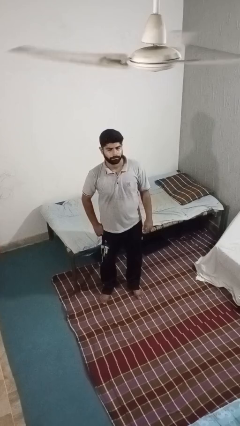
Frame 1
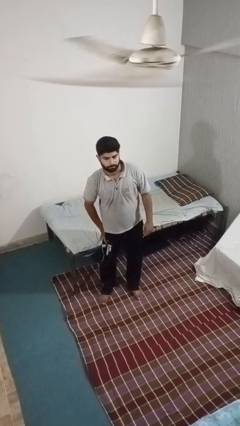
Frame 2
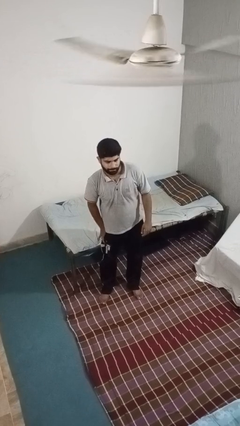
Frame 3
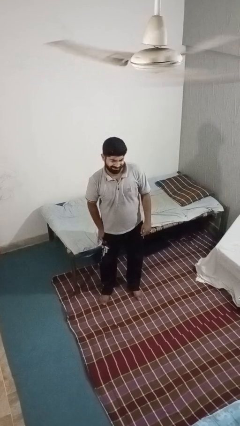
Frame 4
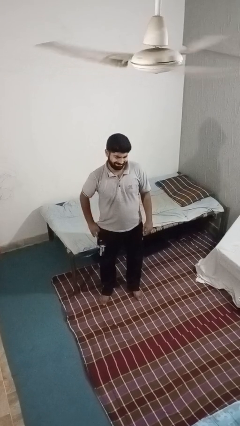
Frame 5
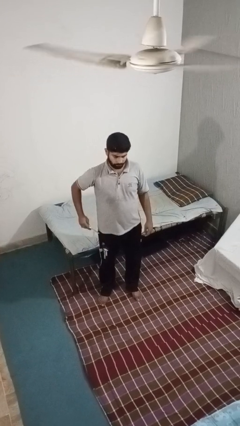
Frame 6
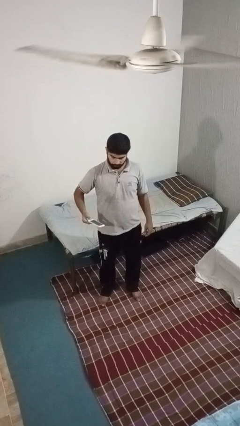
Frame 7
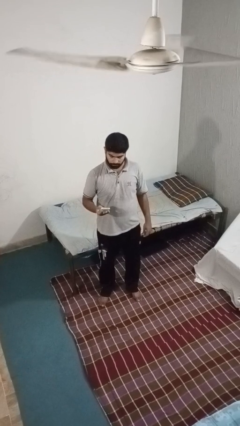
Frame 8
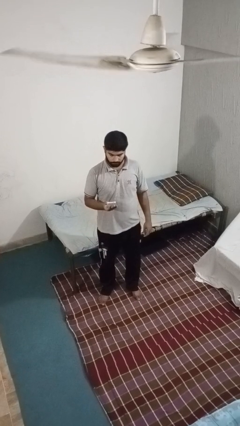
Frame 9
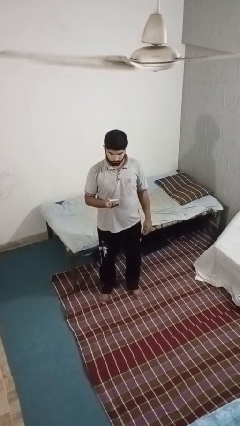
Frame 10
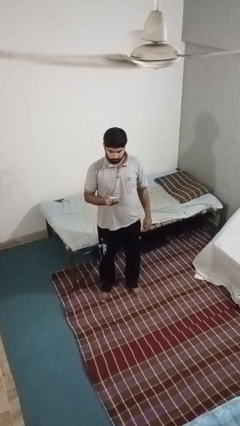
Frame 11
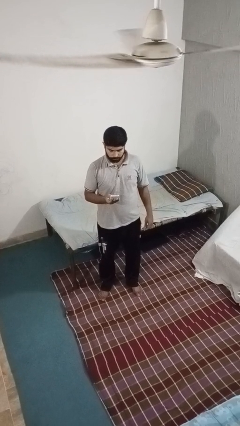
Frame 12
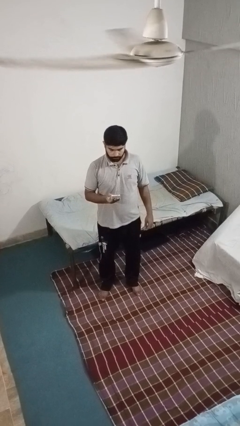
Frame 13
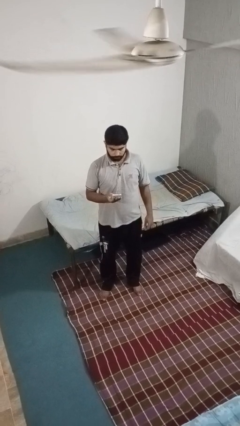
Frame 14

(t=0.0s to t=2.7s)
person takes phone from pocket

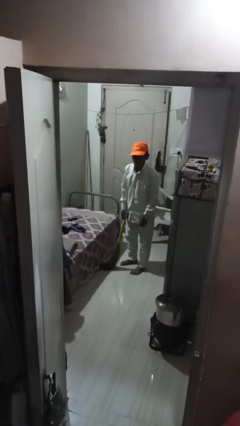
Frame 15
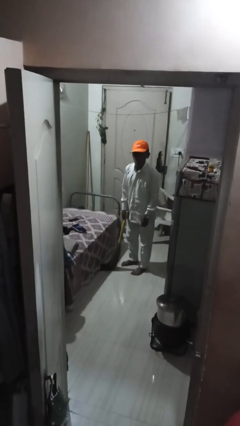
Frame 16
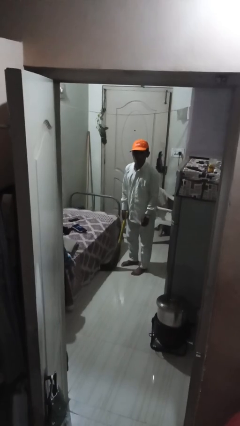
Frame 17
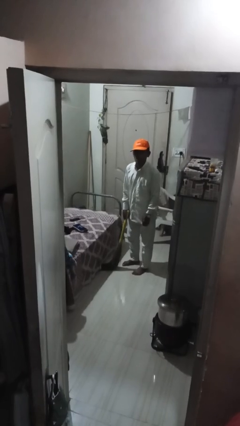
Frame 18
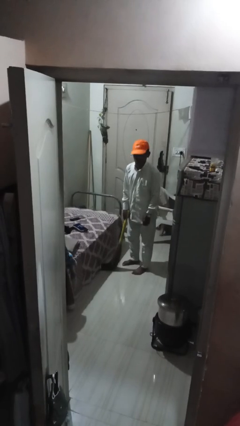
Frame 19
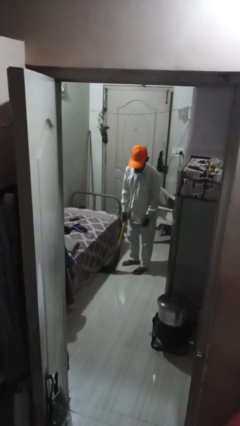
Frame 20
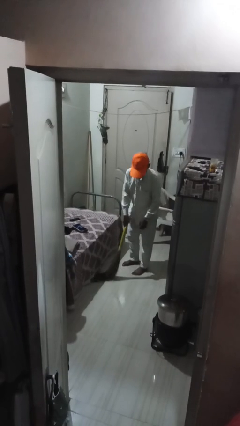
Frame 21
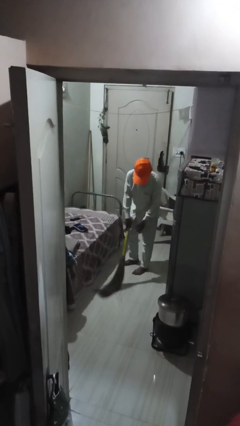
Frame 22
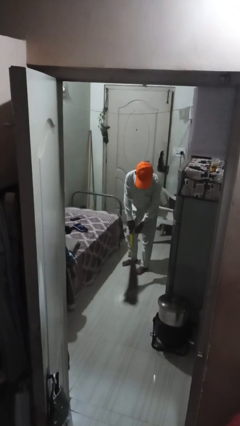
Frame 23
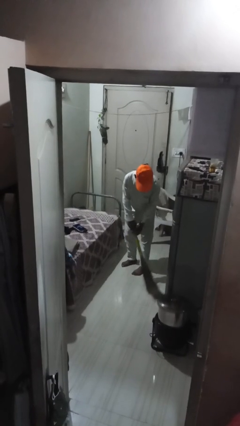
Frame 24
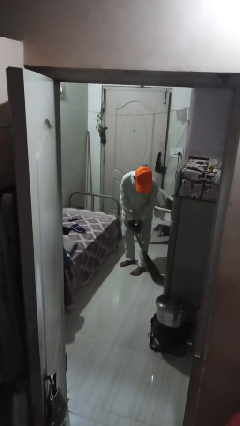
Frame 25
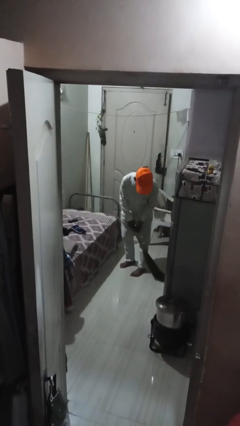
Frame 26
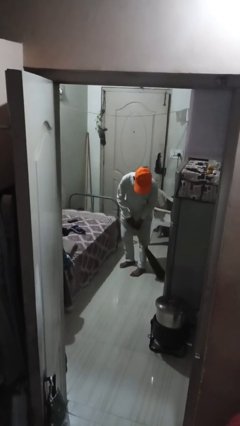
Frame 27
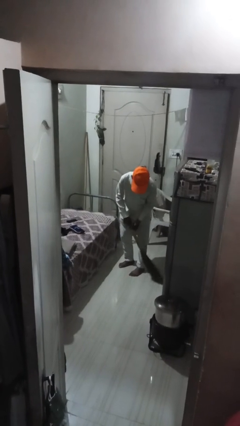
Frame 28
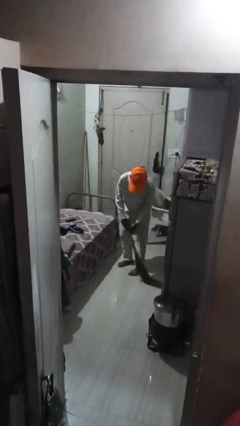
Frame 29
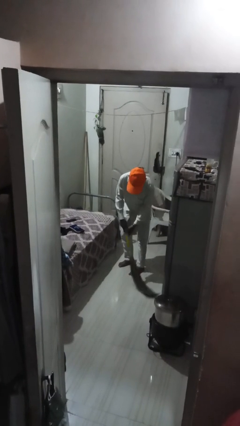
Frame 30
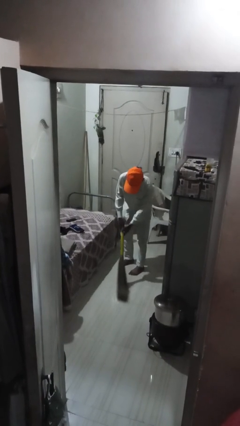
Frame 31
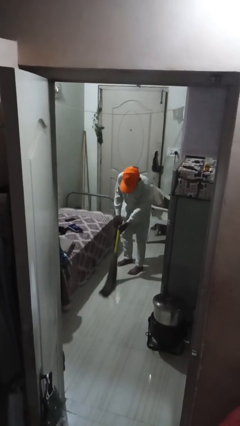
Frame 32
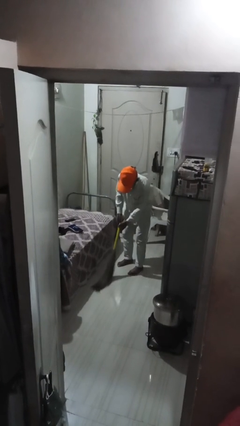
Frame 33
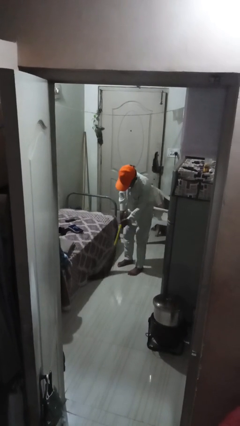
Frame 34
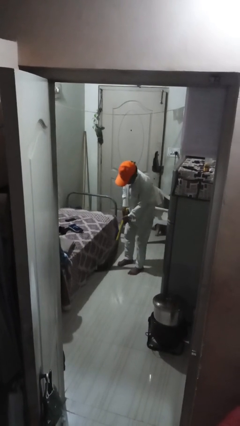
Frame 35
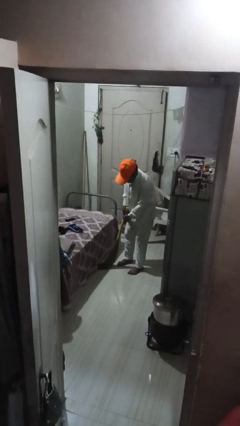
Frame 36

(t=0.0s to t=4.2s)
person sweeps floor

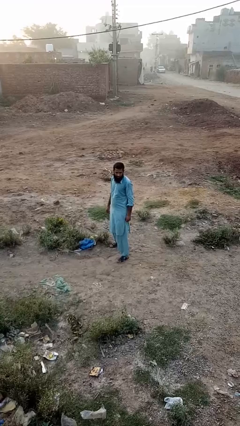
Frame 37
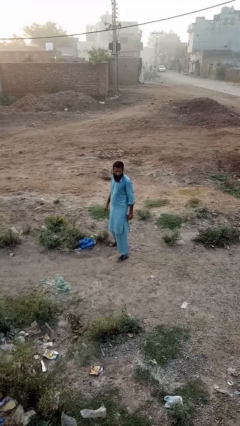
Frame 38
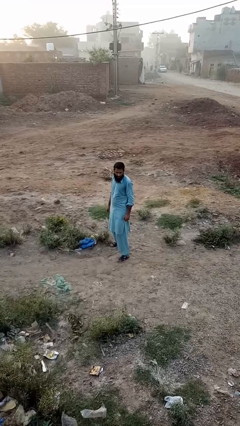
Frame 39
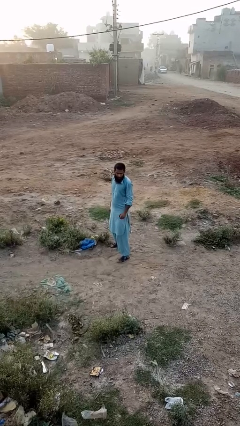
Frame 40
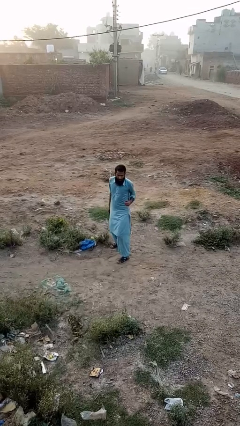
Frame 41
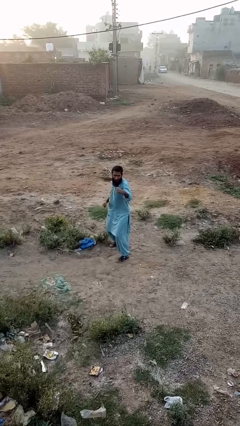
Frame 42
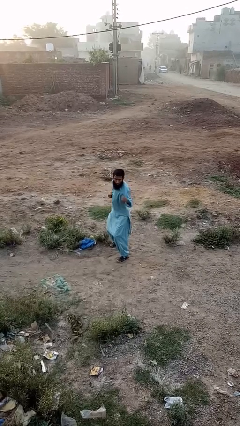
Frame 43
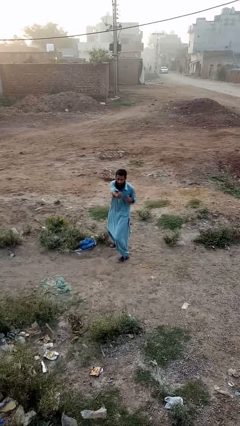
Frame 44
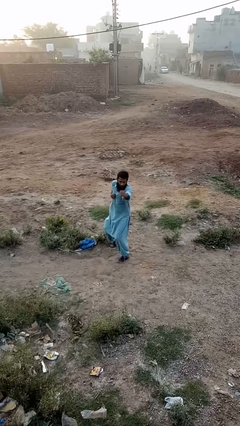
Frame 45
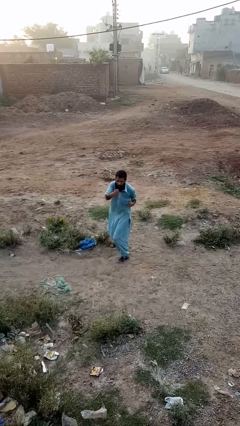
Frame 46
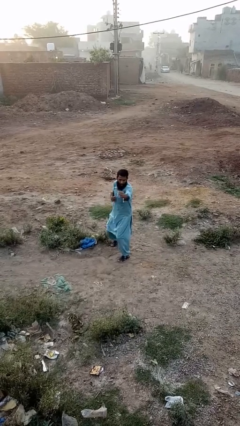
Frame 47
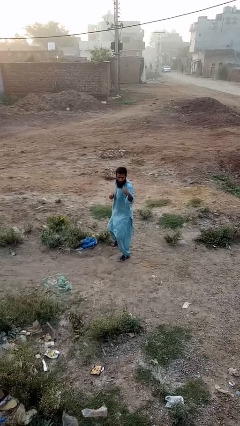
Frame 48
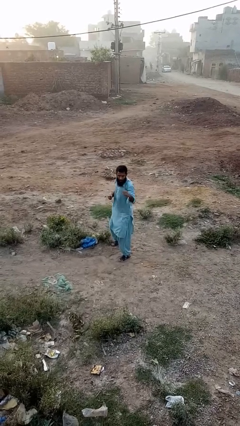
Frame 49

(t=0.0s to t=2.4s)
person punches

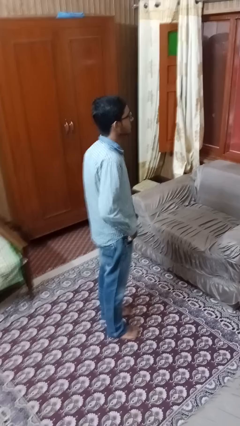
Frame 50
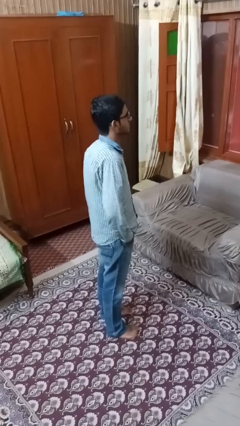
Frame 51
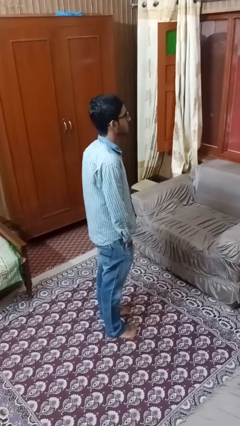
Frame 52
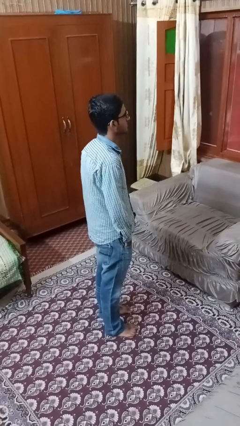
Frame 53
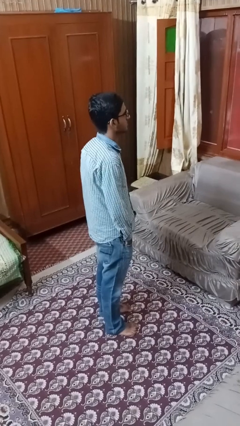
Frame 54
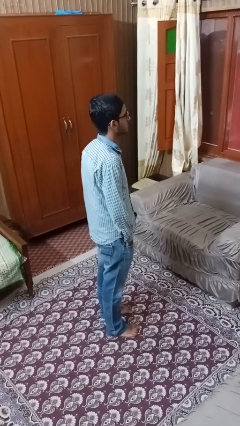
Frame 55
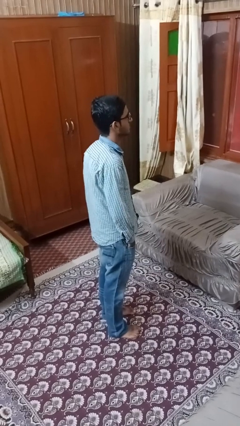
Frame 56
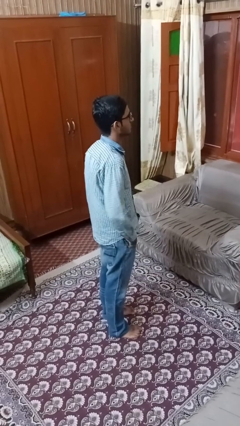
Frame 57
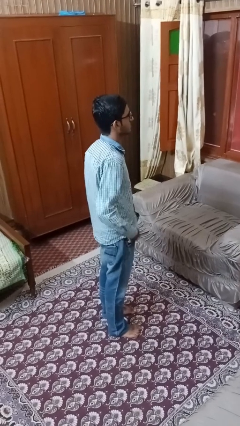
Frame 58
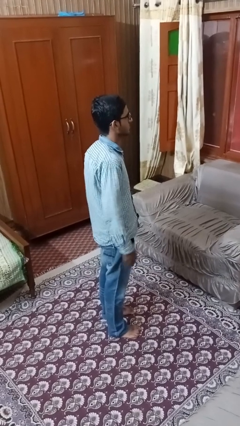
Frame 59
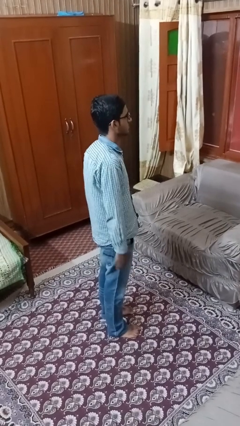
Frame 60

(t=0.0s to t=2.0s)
person puts hands in back pockets

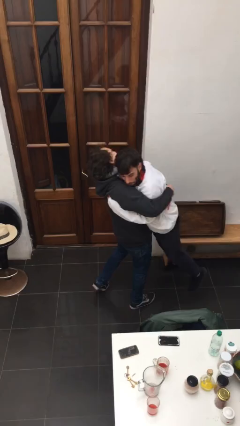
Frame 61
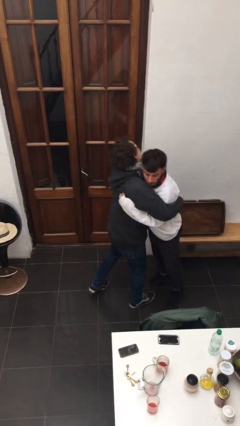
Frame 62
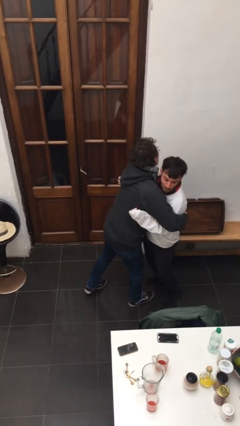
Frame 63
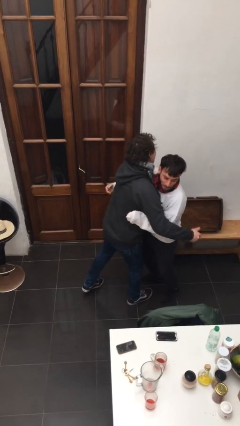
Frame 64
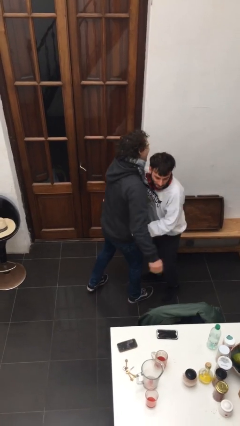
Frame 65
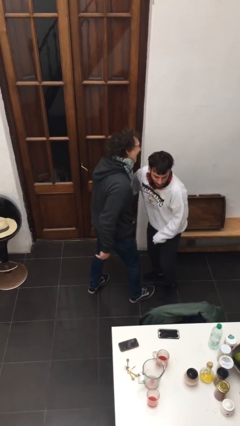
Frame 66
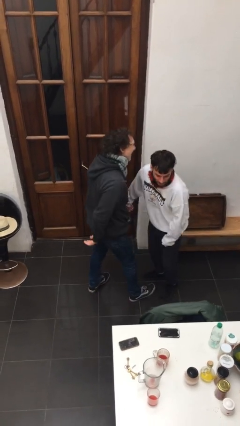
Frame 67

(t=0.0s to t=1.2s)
person puts down person

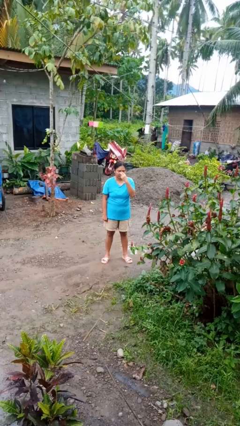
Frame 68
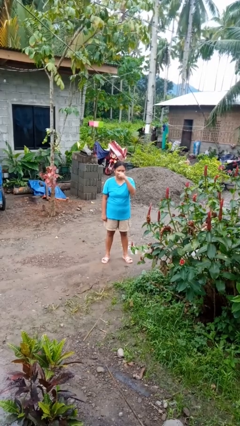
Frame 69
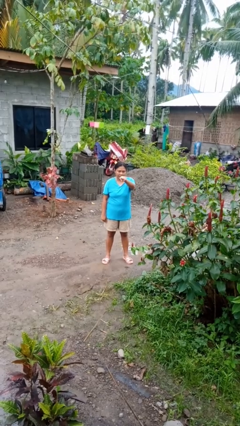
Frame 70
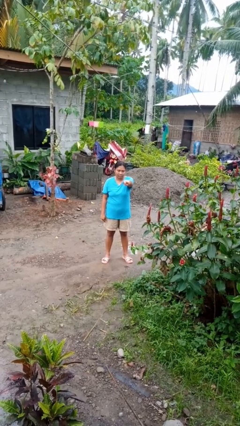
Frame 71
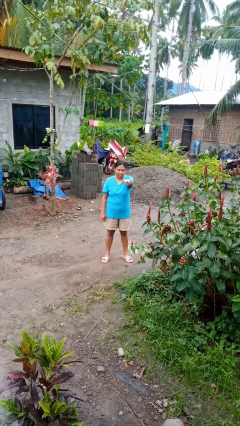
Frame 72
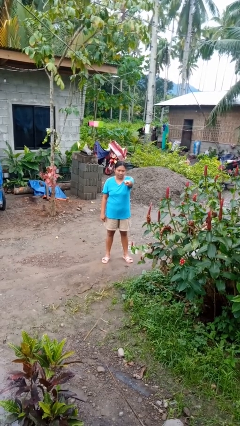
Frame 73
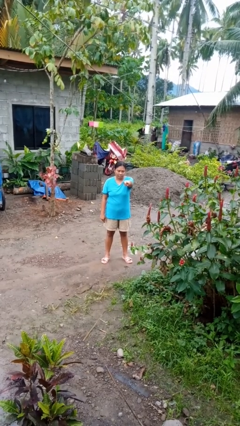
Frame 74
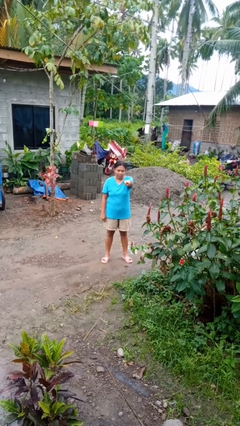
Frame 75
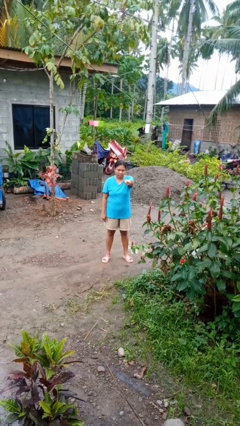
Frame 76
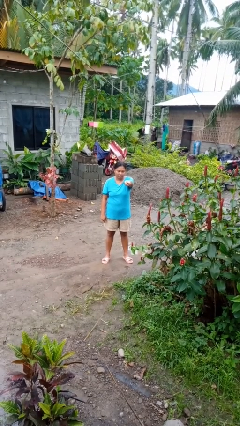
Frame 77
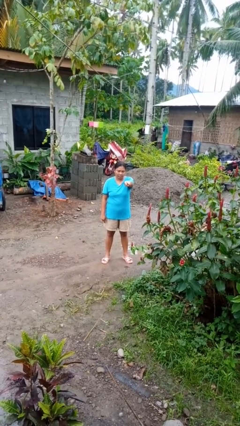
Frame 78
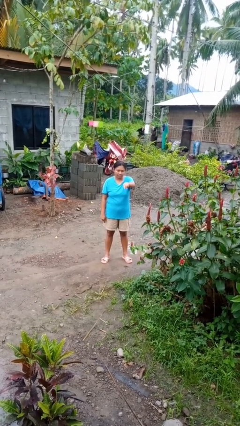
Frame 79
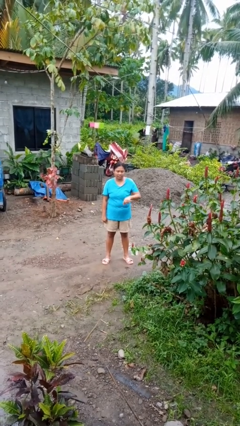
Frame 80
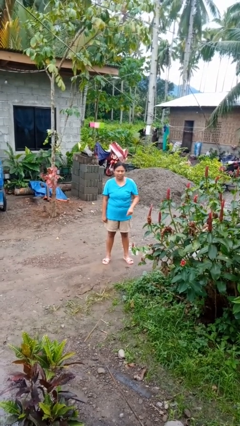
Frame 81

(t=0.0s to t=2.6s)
person gestures watch closely

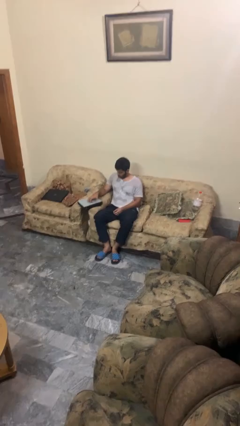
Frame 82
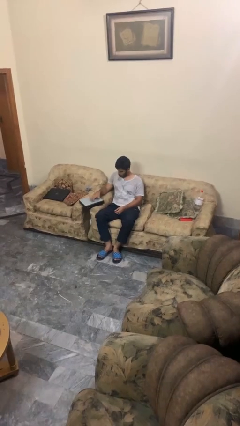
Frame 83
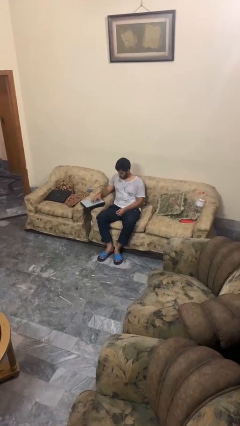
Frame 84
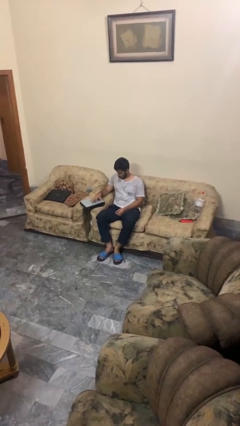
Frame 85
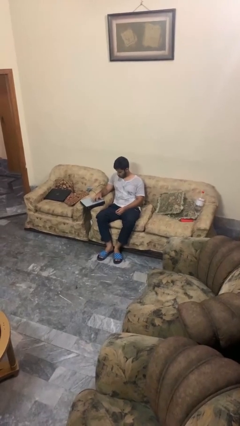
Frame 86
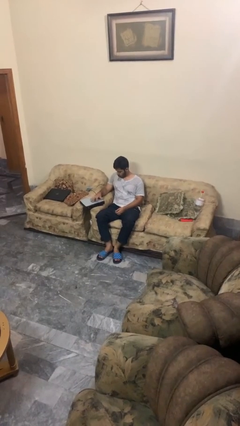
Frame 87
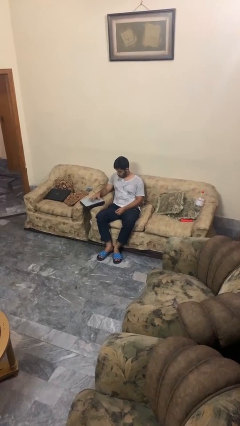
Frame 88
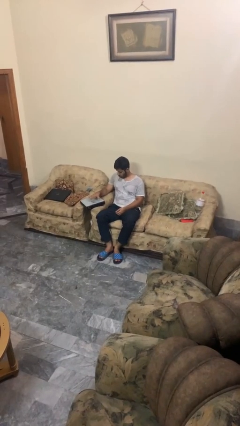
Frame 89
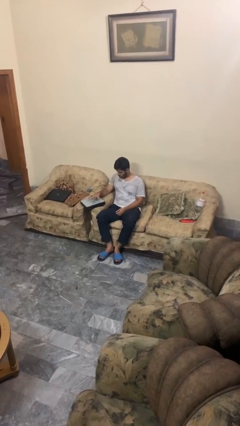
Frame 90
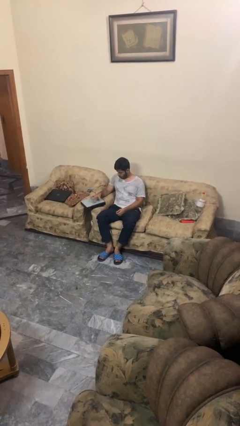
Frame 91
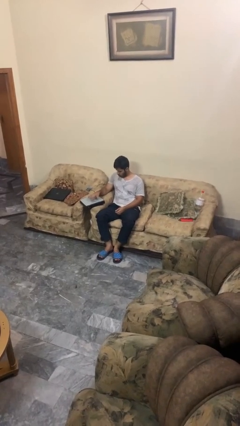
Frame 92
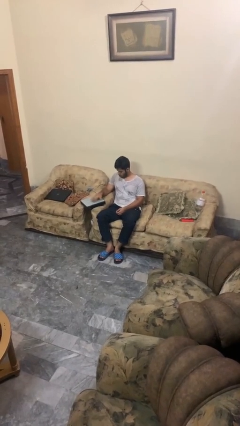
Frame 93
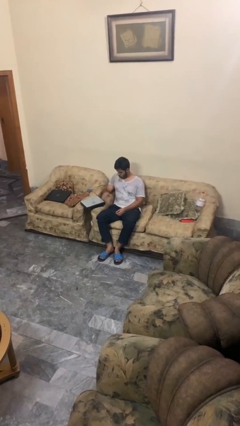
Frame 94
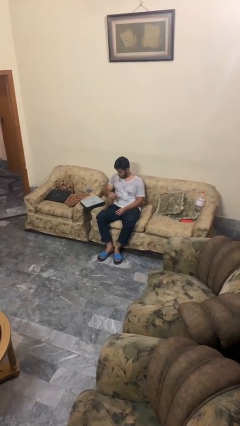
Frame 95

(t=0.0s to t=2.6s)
person taps object with finger
